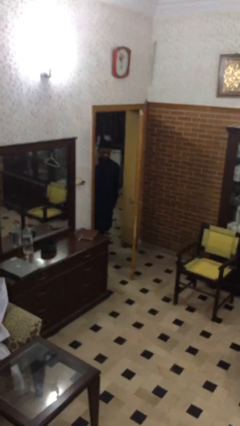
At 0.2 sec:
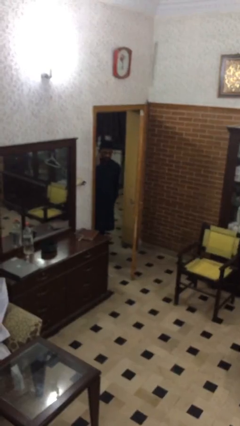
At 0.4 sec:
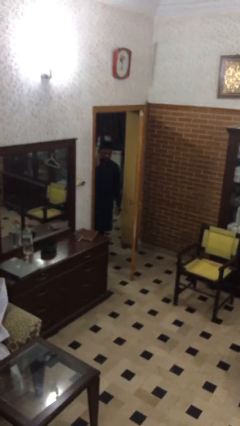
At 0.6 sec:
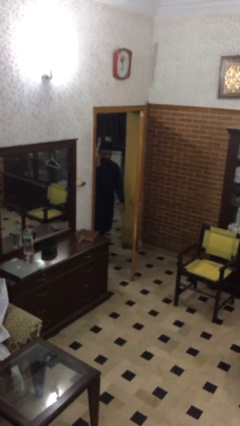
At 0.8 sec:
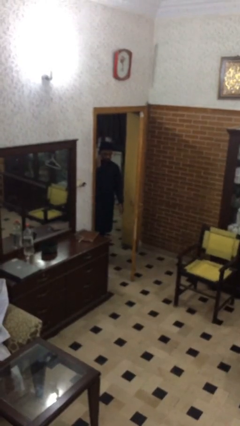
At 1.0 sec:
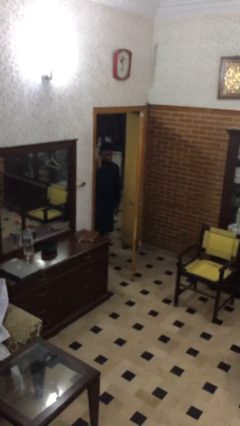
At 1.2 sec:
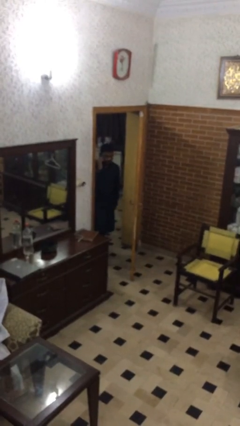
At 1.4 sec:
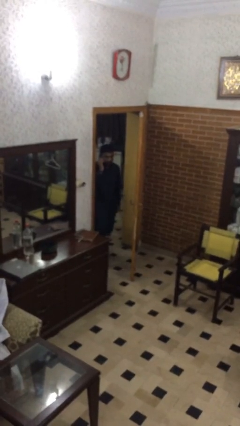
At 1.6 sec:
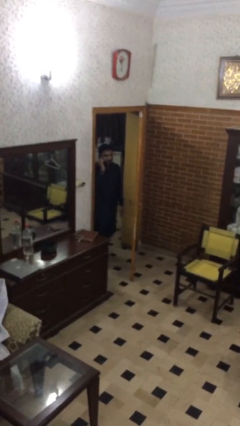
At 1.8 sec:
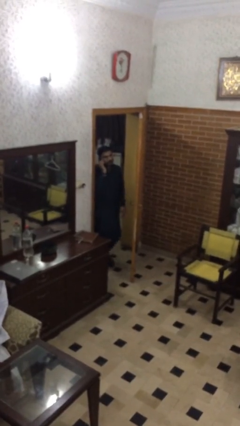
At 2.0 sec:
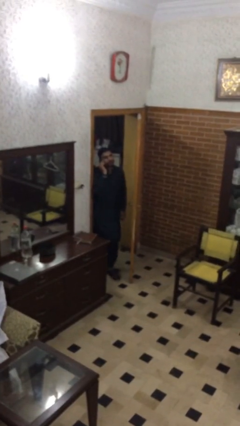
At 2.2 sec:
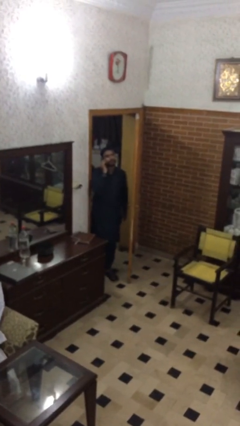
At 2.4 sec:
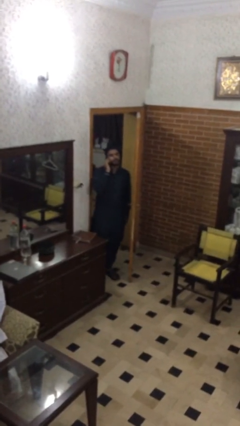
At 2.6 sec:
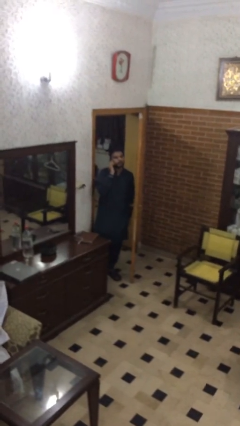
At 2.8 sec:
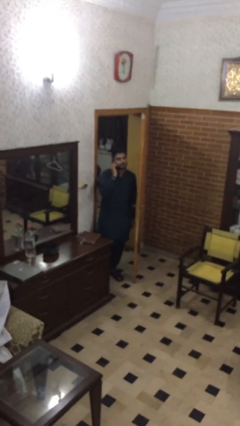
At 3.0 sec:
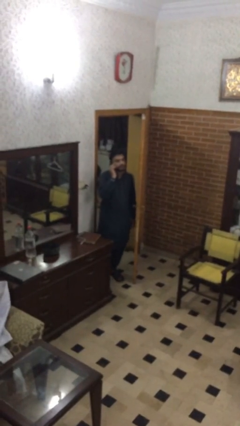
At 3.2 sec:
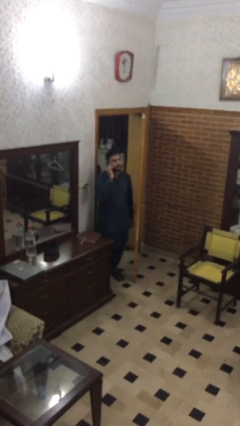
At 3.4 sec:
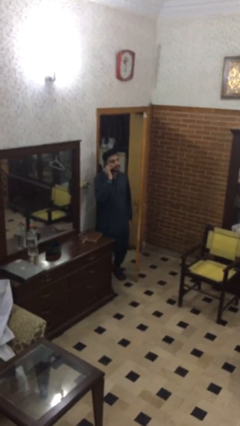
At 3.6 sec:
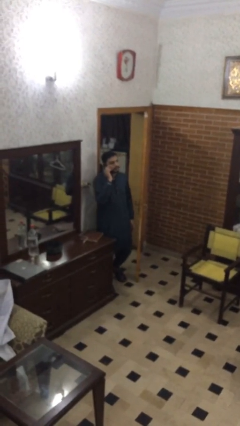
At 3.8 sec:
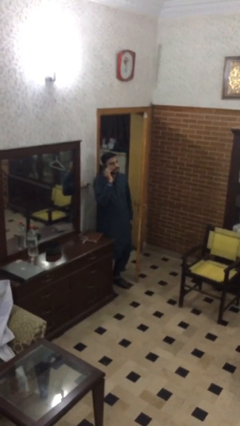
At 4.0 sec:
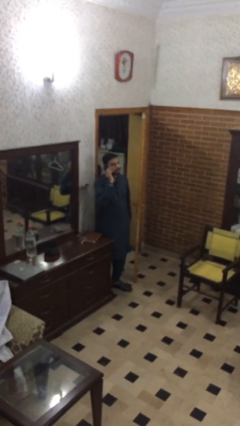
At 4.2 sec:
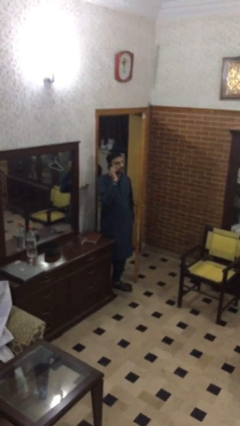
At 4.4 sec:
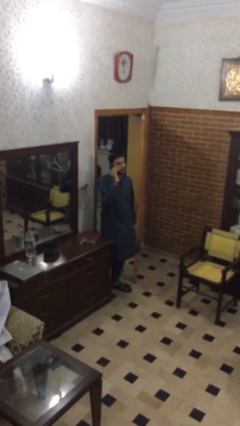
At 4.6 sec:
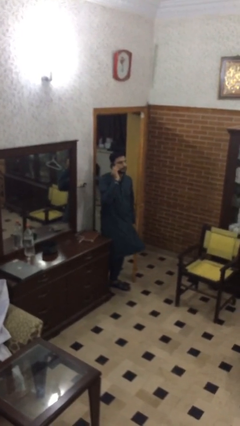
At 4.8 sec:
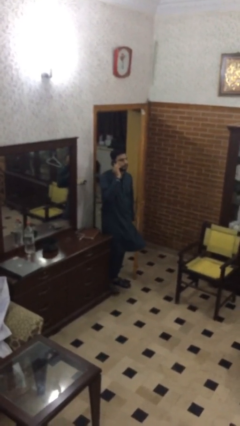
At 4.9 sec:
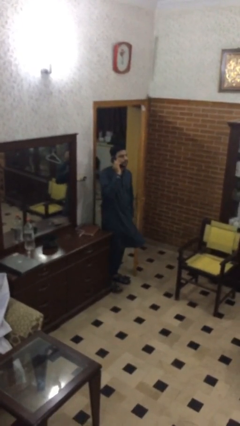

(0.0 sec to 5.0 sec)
person enters scene through structure

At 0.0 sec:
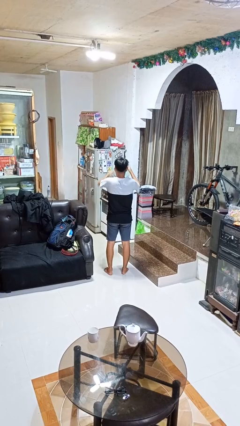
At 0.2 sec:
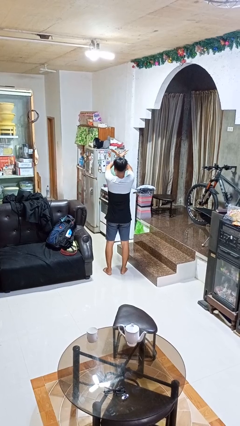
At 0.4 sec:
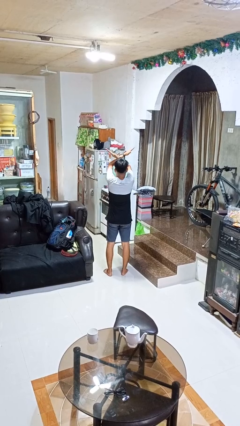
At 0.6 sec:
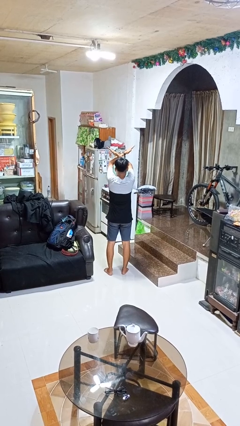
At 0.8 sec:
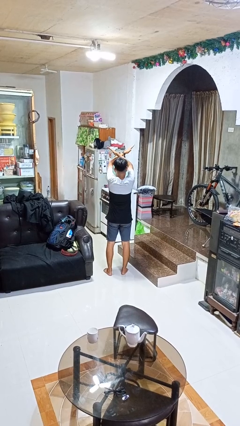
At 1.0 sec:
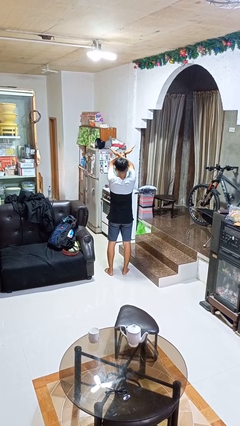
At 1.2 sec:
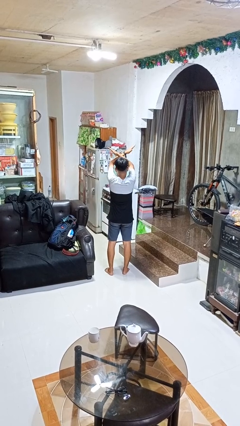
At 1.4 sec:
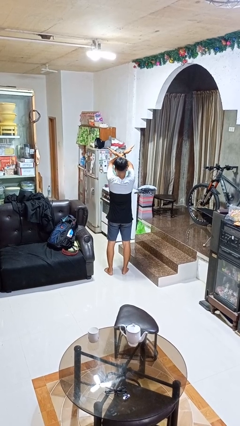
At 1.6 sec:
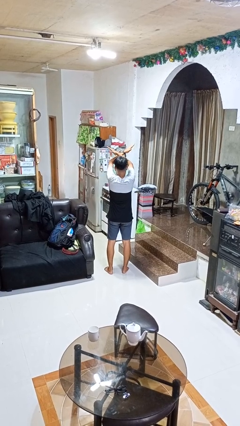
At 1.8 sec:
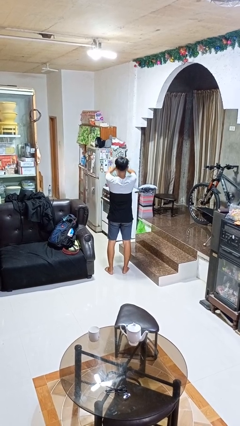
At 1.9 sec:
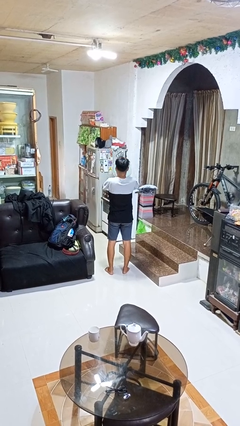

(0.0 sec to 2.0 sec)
person gestures arms x

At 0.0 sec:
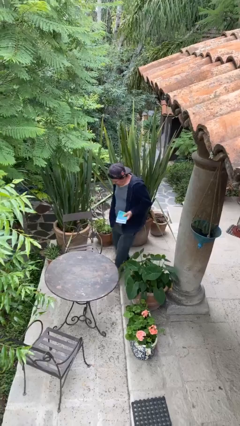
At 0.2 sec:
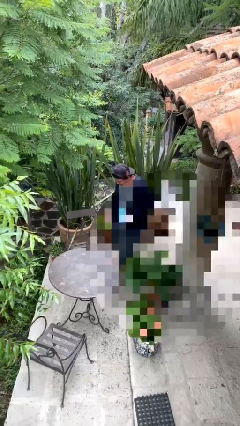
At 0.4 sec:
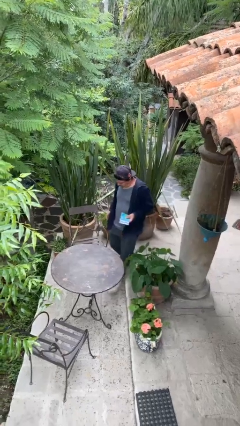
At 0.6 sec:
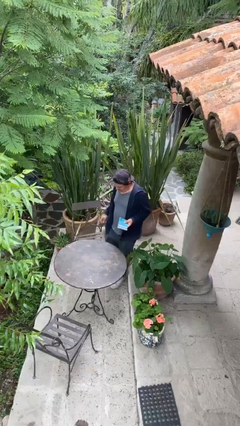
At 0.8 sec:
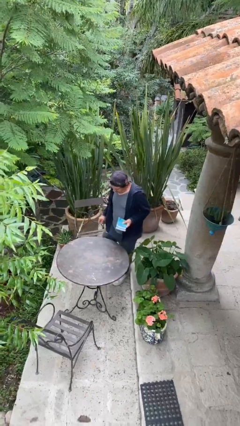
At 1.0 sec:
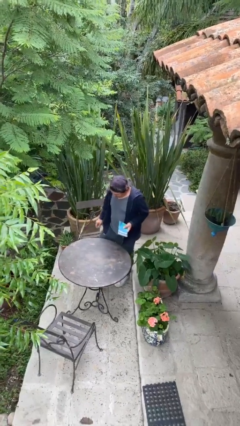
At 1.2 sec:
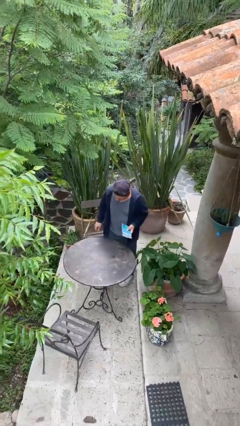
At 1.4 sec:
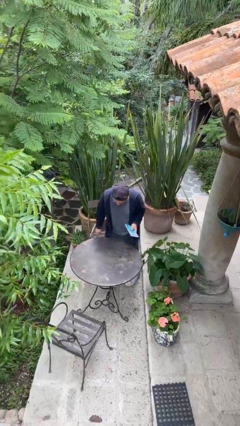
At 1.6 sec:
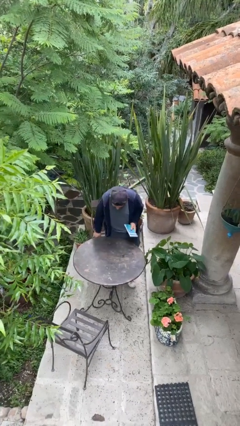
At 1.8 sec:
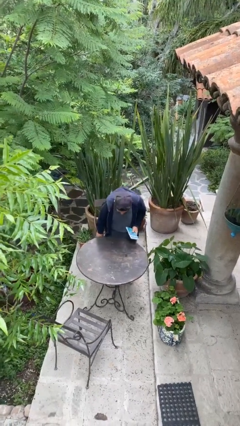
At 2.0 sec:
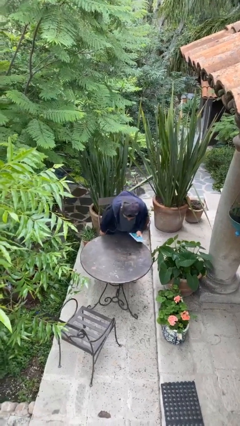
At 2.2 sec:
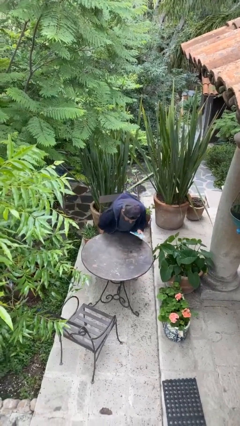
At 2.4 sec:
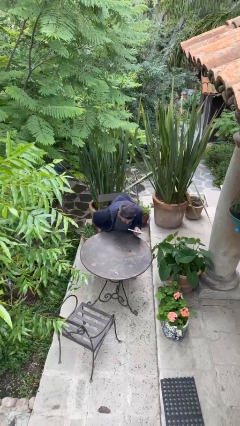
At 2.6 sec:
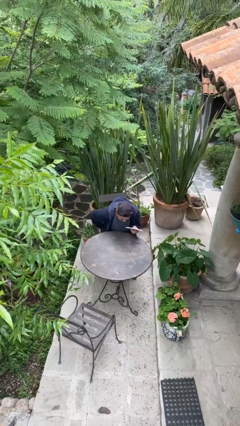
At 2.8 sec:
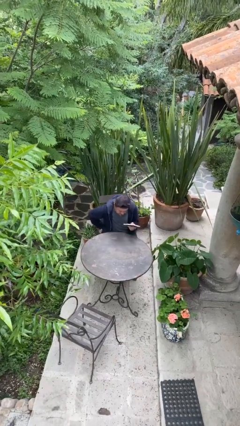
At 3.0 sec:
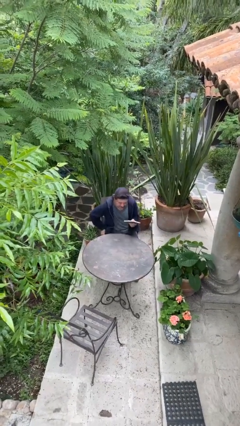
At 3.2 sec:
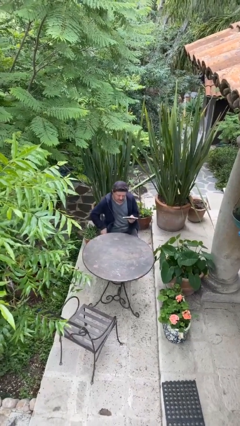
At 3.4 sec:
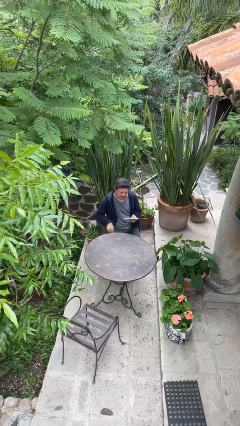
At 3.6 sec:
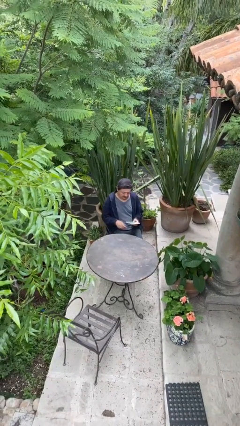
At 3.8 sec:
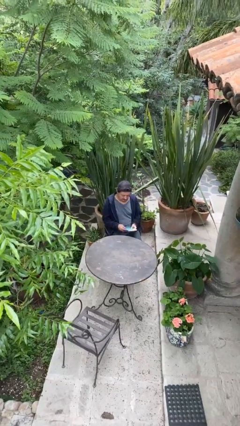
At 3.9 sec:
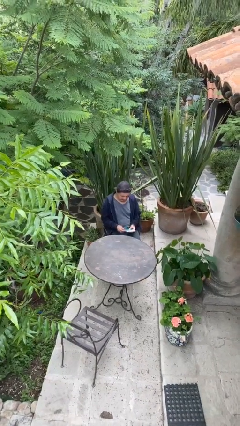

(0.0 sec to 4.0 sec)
person sits down

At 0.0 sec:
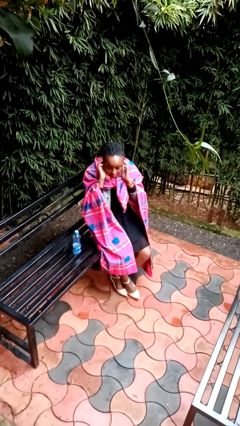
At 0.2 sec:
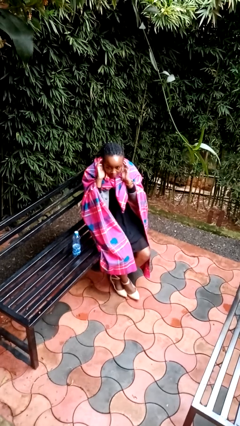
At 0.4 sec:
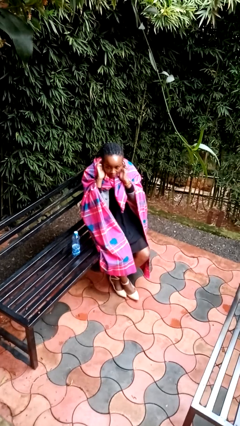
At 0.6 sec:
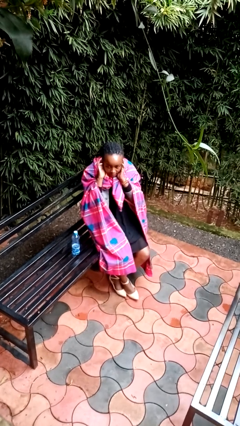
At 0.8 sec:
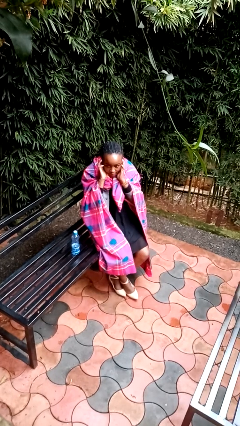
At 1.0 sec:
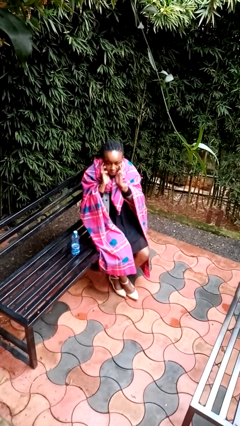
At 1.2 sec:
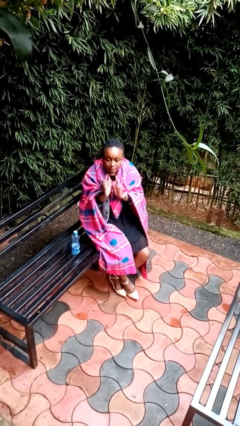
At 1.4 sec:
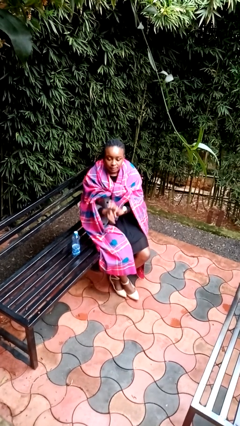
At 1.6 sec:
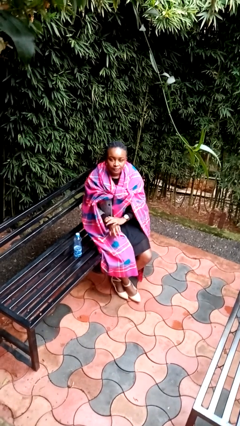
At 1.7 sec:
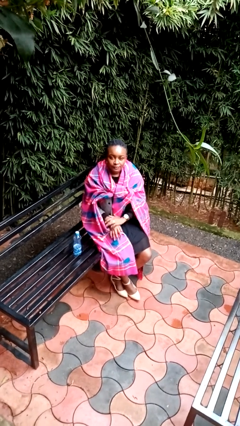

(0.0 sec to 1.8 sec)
person puts fingers in ear

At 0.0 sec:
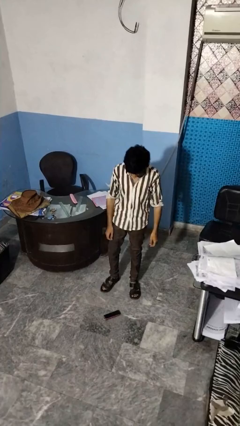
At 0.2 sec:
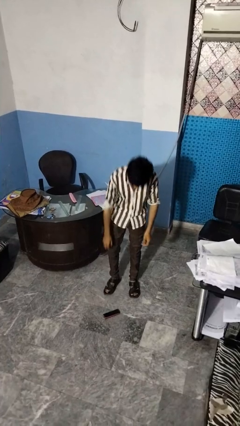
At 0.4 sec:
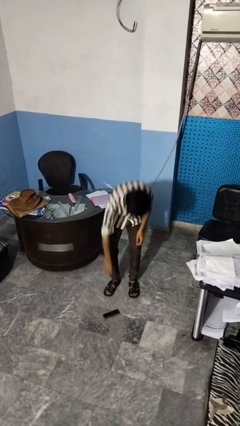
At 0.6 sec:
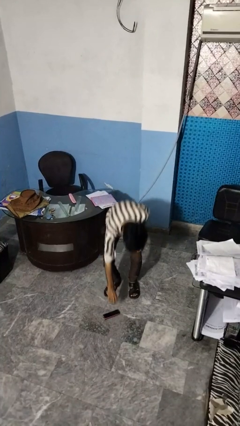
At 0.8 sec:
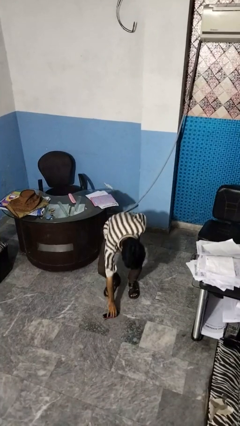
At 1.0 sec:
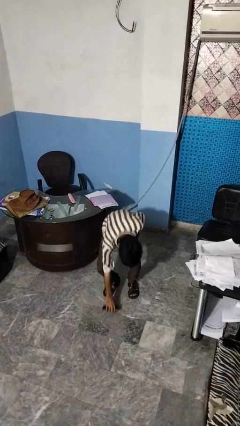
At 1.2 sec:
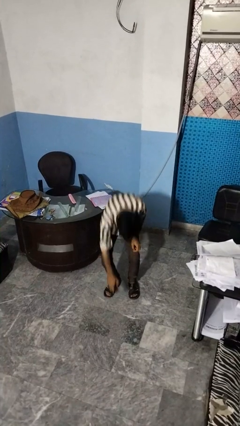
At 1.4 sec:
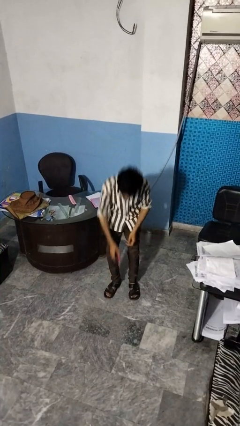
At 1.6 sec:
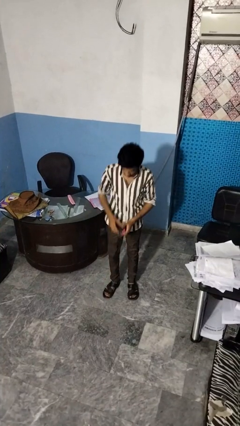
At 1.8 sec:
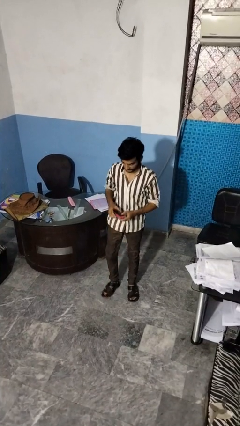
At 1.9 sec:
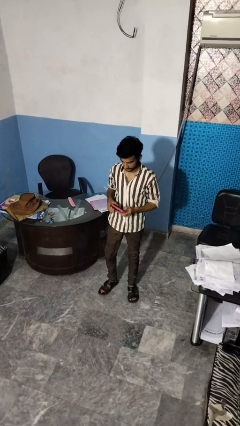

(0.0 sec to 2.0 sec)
person picks up object from floor

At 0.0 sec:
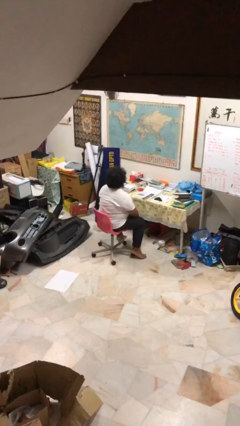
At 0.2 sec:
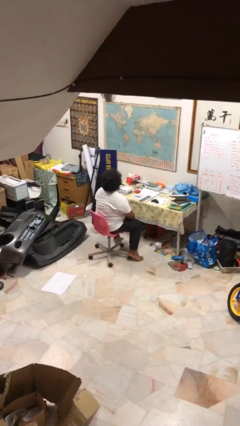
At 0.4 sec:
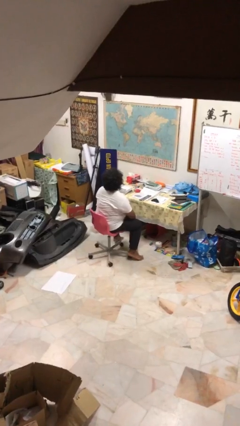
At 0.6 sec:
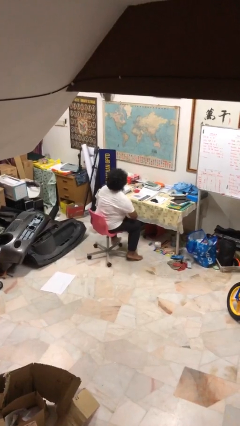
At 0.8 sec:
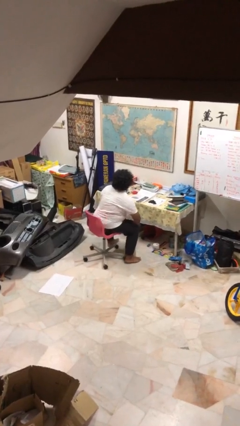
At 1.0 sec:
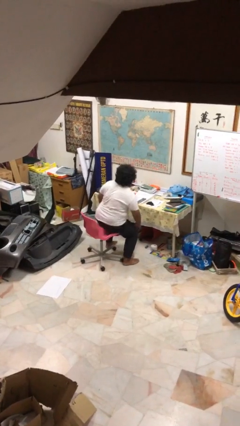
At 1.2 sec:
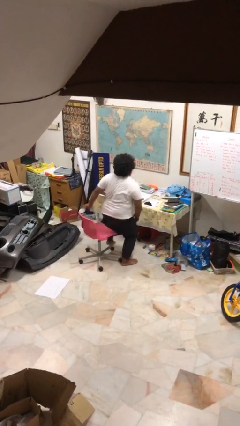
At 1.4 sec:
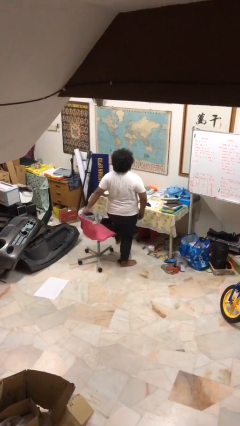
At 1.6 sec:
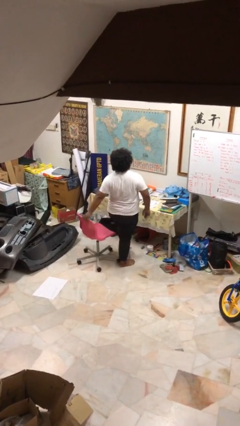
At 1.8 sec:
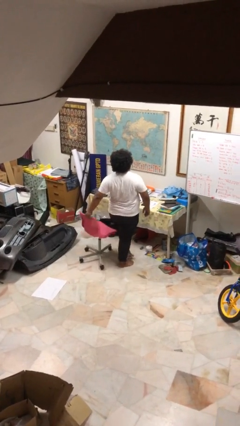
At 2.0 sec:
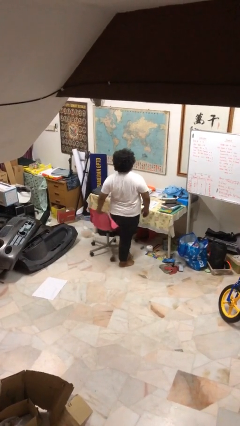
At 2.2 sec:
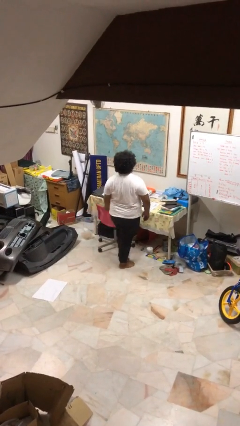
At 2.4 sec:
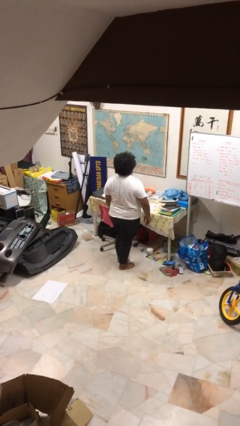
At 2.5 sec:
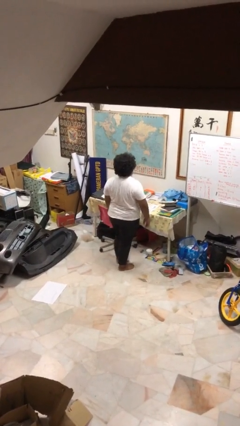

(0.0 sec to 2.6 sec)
person stands up
